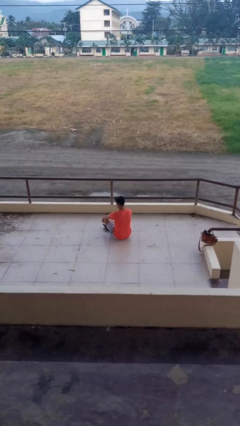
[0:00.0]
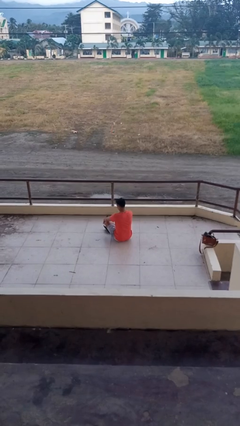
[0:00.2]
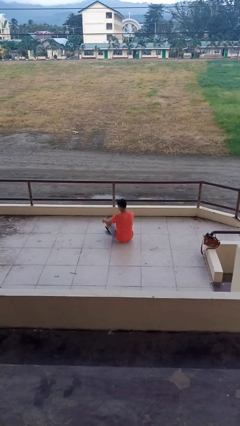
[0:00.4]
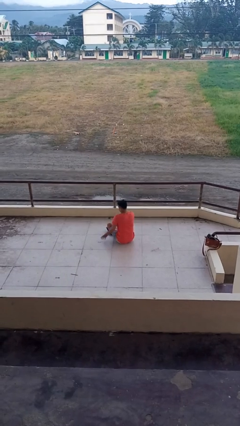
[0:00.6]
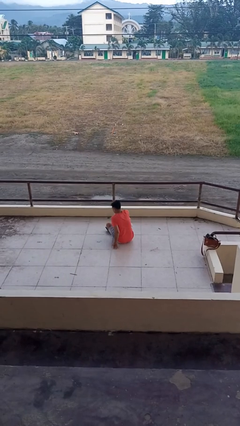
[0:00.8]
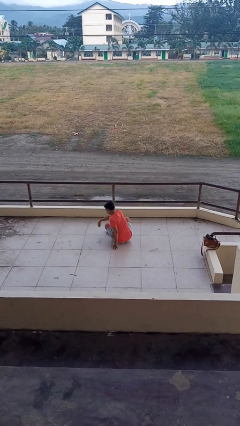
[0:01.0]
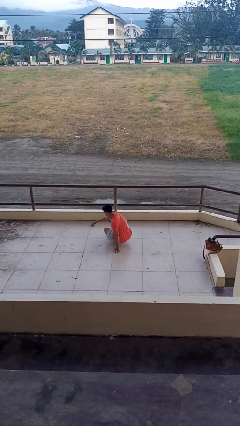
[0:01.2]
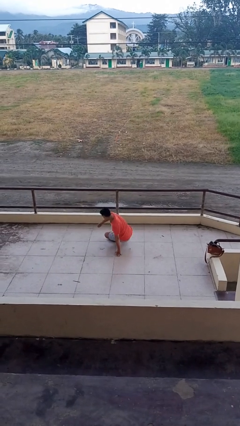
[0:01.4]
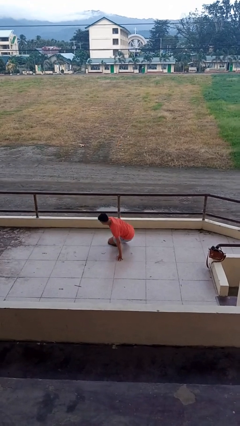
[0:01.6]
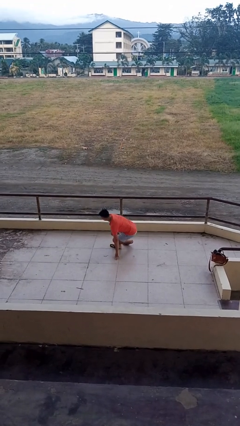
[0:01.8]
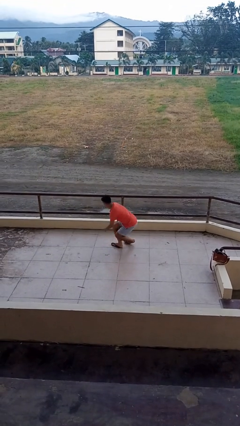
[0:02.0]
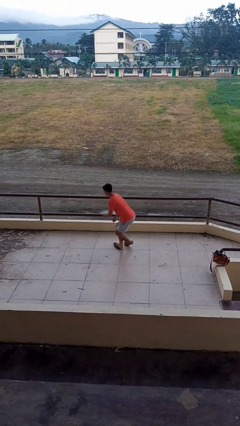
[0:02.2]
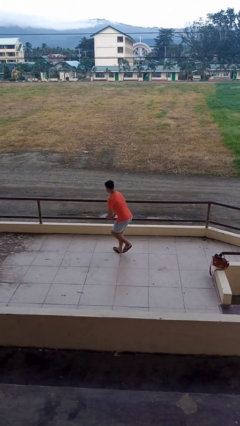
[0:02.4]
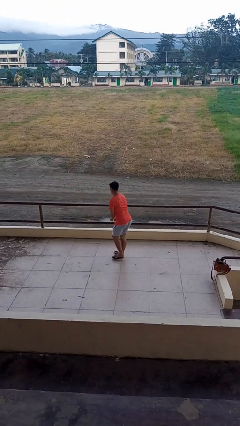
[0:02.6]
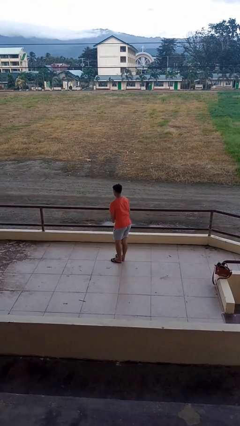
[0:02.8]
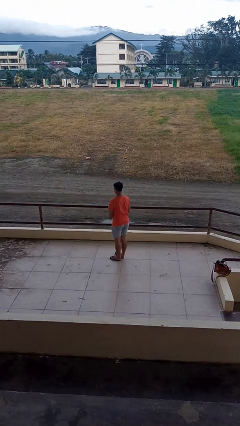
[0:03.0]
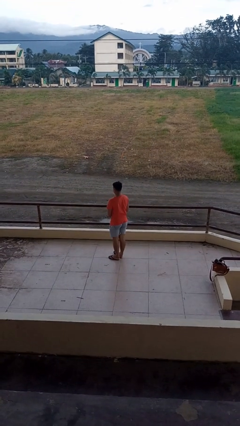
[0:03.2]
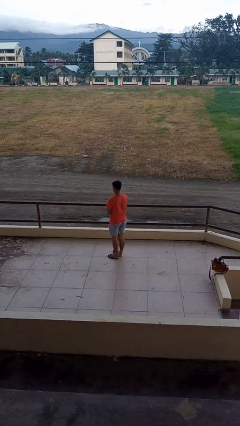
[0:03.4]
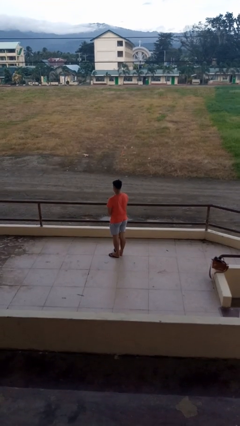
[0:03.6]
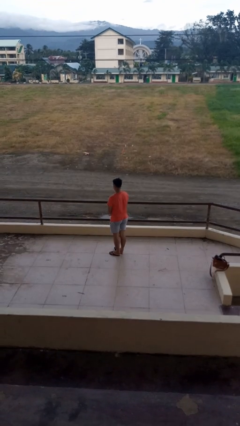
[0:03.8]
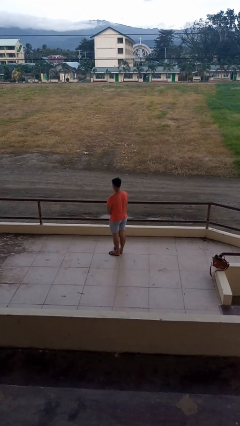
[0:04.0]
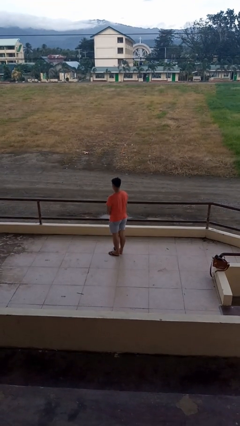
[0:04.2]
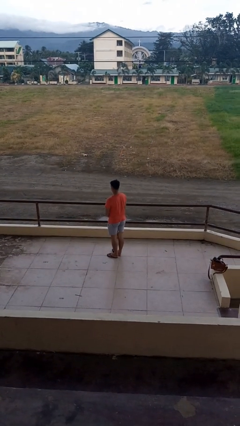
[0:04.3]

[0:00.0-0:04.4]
person stands up from floor

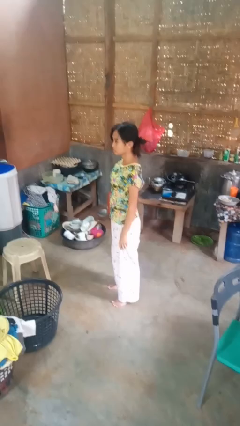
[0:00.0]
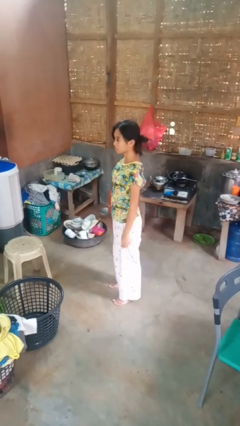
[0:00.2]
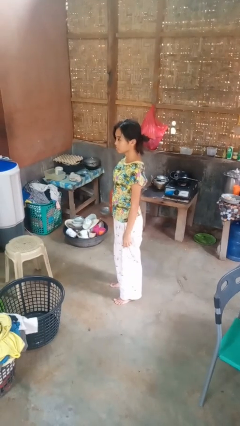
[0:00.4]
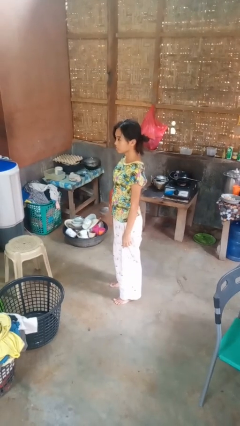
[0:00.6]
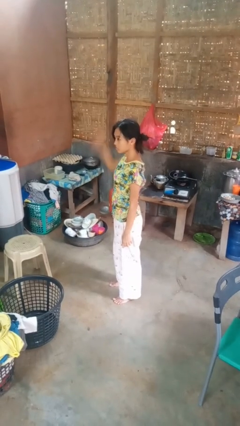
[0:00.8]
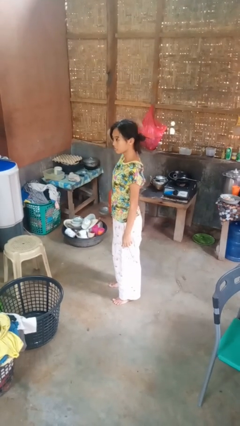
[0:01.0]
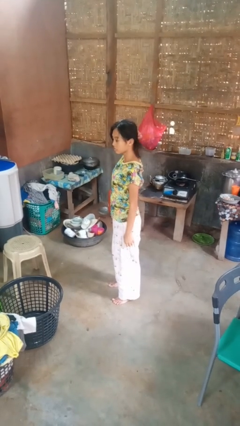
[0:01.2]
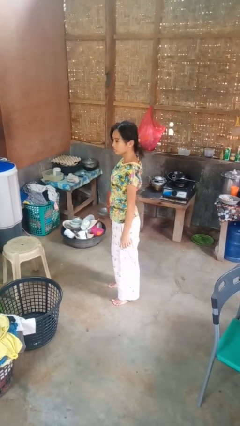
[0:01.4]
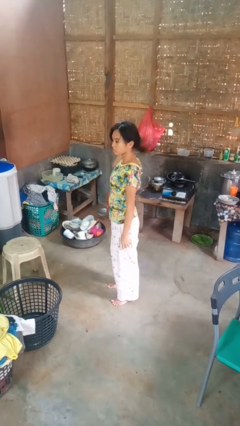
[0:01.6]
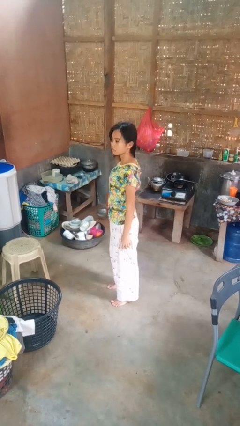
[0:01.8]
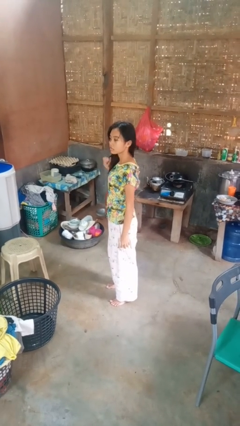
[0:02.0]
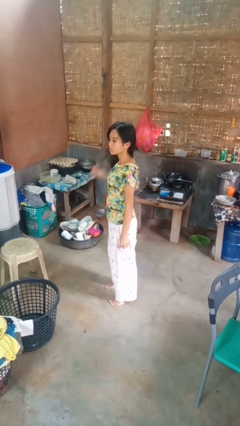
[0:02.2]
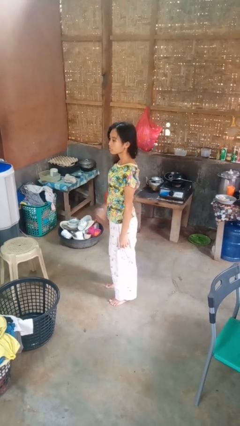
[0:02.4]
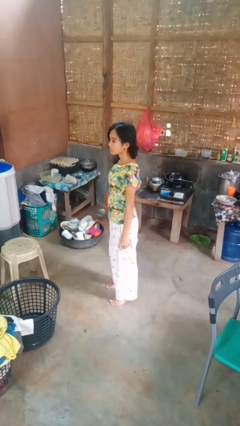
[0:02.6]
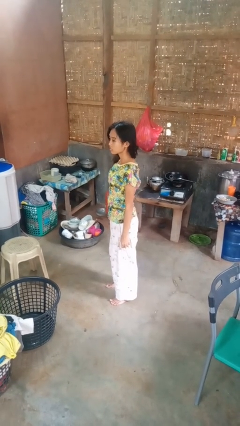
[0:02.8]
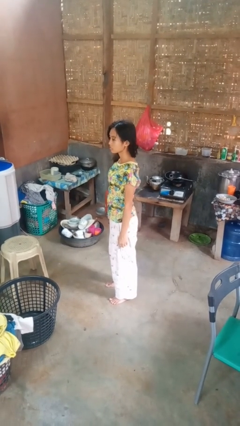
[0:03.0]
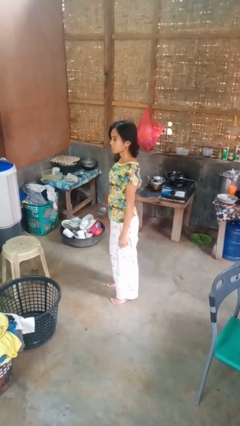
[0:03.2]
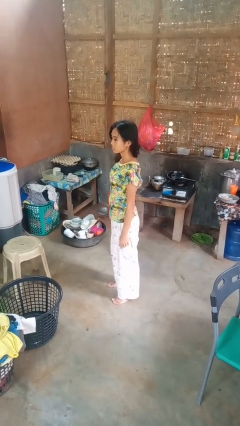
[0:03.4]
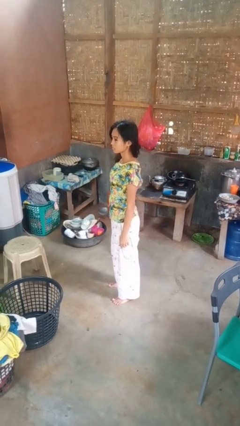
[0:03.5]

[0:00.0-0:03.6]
person takes off hairtie

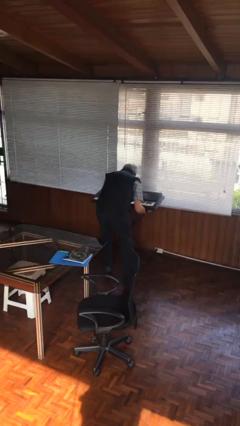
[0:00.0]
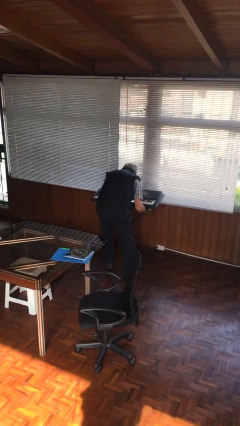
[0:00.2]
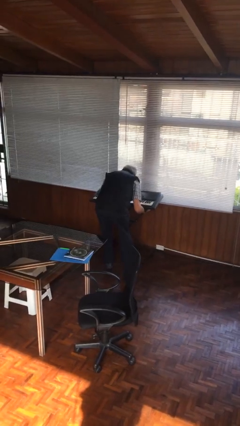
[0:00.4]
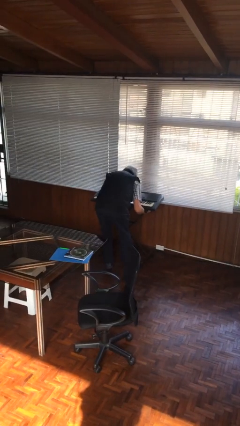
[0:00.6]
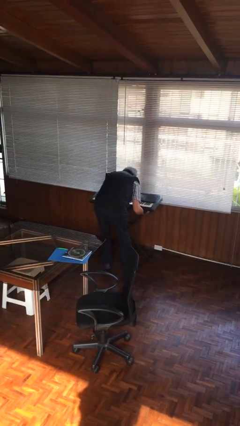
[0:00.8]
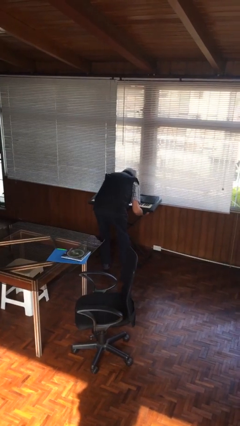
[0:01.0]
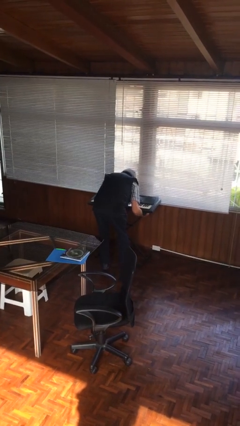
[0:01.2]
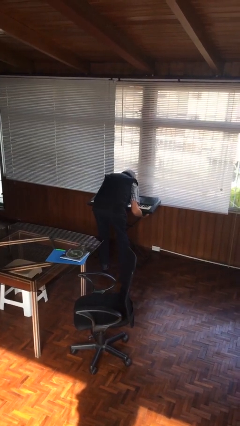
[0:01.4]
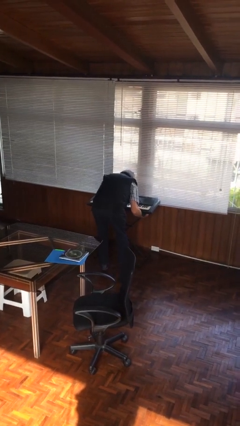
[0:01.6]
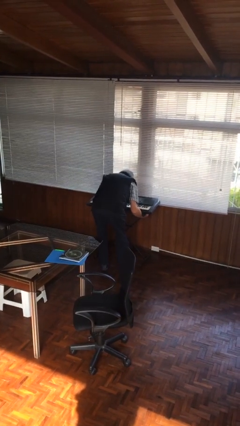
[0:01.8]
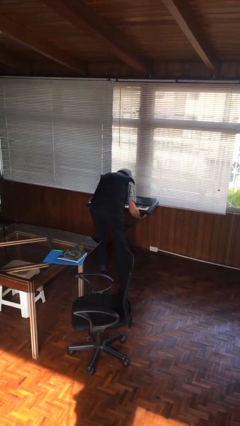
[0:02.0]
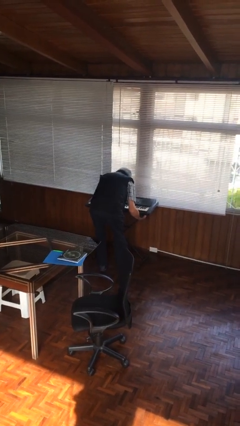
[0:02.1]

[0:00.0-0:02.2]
person puts down object on floor

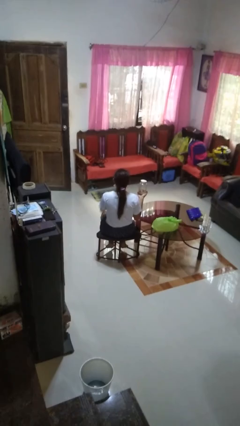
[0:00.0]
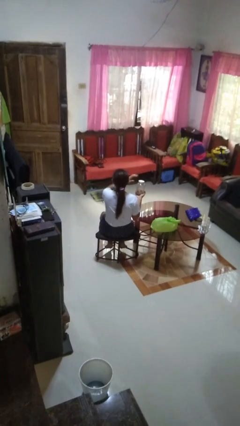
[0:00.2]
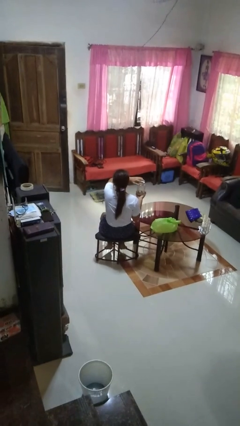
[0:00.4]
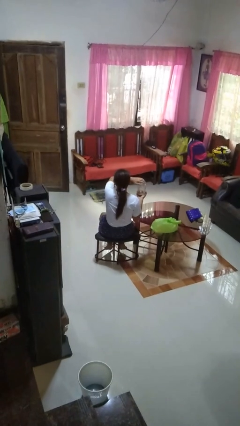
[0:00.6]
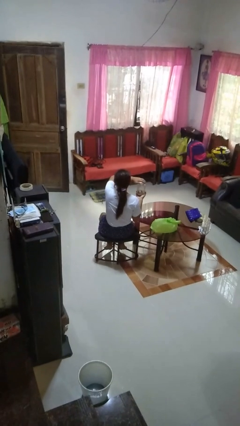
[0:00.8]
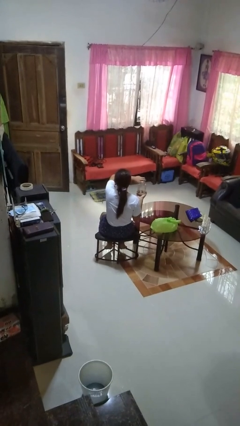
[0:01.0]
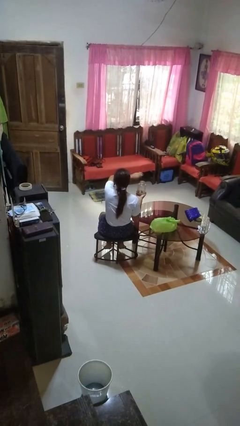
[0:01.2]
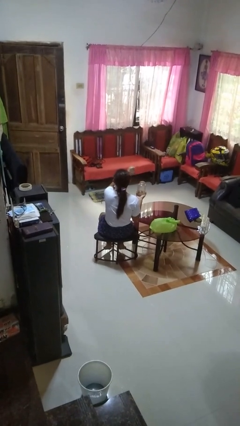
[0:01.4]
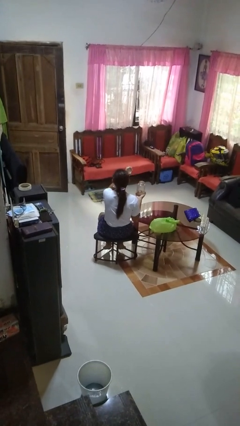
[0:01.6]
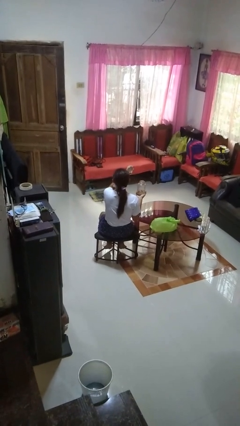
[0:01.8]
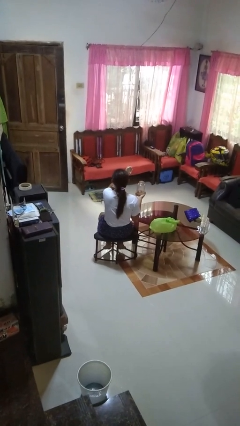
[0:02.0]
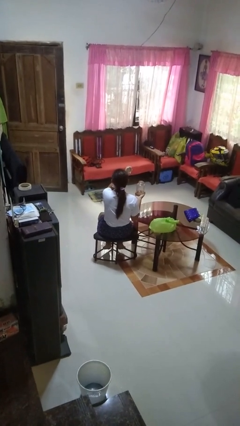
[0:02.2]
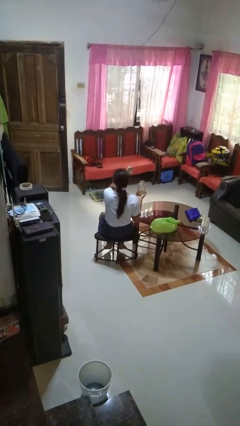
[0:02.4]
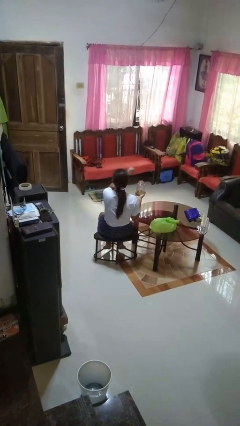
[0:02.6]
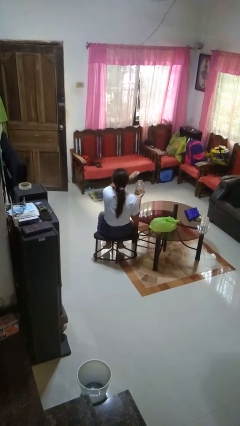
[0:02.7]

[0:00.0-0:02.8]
person opens jar

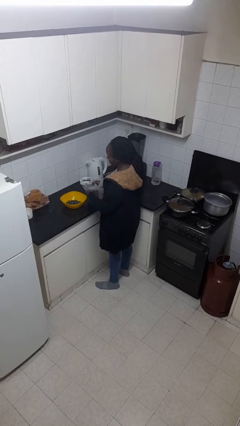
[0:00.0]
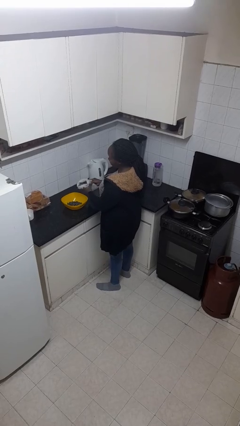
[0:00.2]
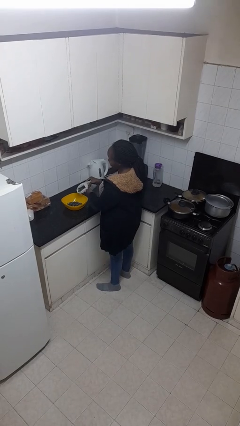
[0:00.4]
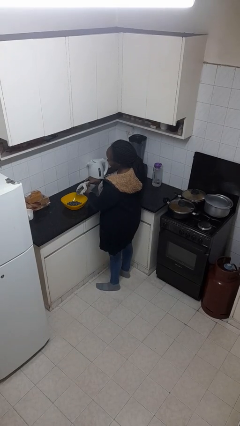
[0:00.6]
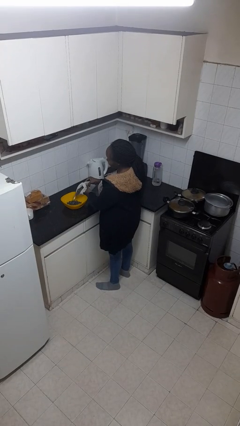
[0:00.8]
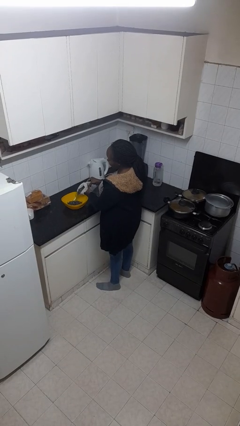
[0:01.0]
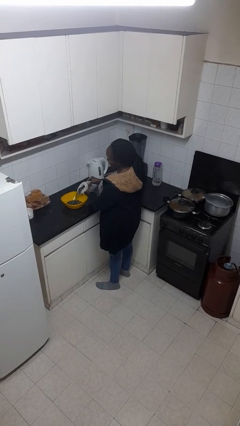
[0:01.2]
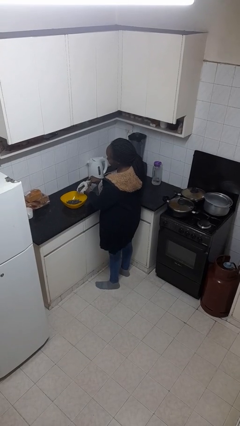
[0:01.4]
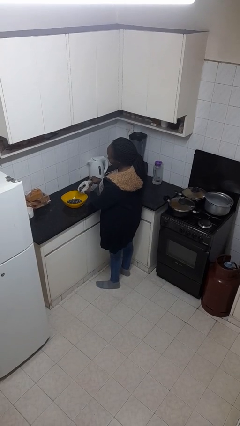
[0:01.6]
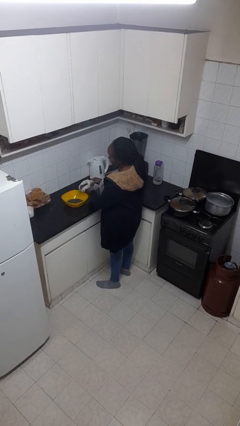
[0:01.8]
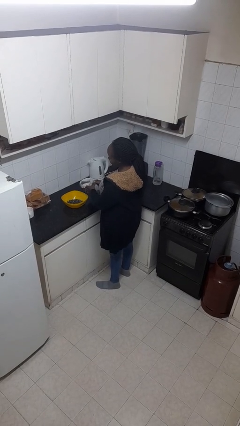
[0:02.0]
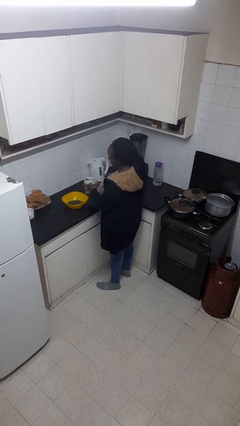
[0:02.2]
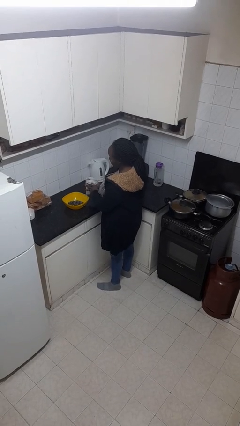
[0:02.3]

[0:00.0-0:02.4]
person pours into bowl

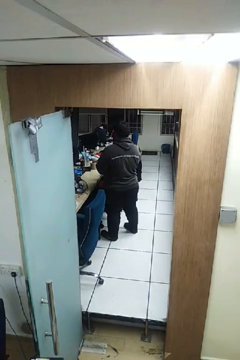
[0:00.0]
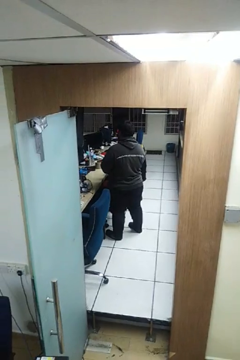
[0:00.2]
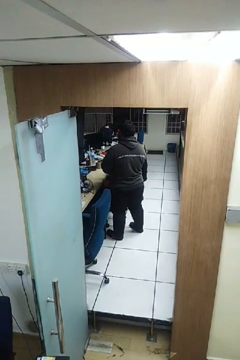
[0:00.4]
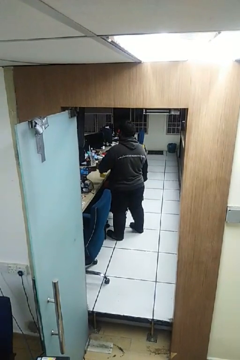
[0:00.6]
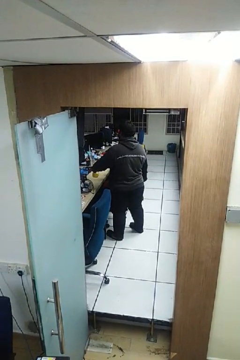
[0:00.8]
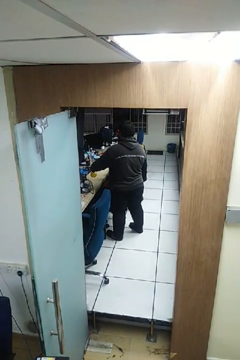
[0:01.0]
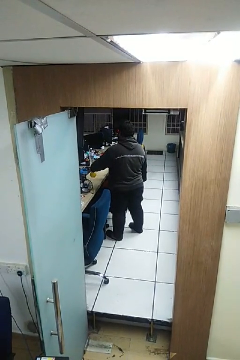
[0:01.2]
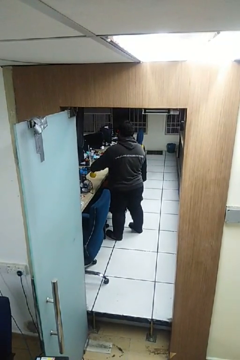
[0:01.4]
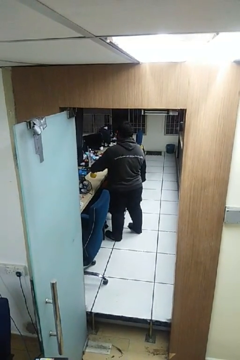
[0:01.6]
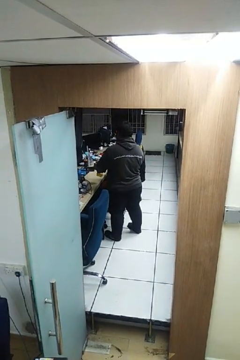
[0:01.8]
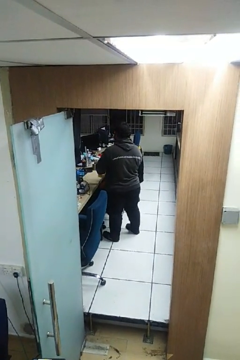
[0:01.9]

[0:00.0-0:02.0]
person sprays from bottle

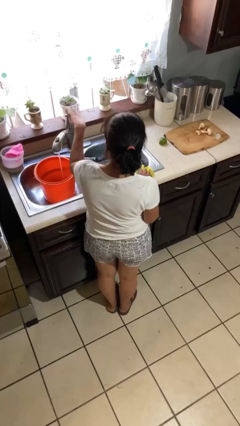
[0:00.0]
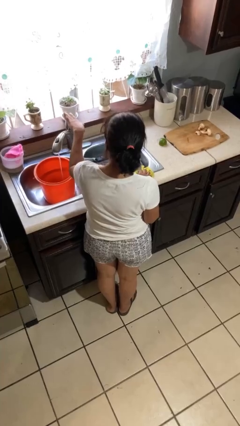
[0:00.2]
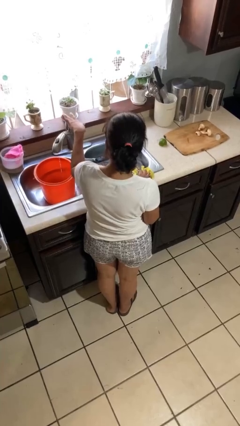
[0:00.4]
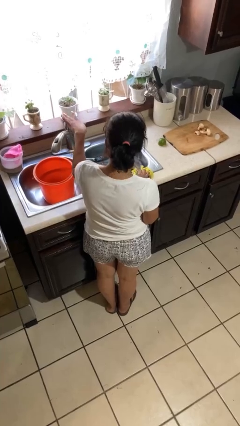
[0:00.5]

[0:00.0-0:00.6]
person turns off faucet
